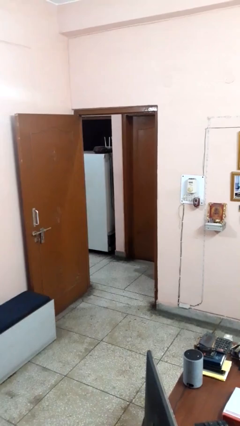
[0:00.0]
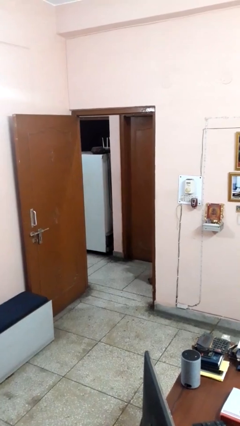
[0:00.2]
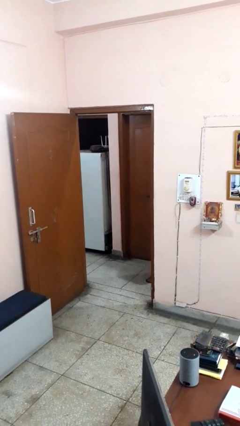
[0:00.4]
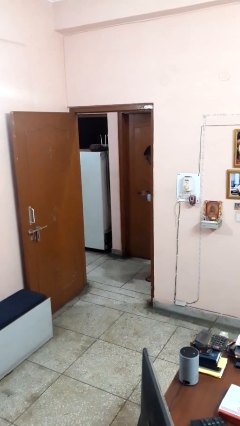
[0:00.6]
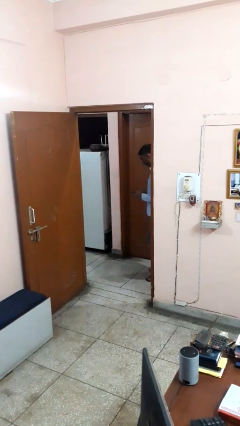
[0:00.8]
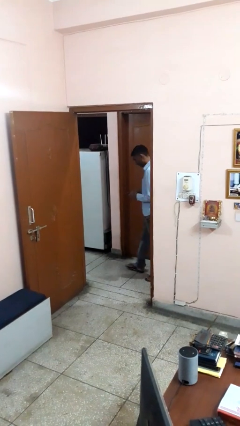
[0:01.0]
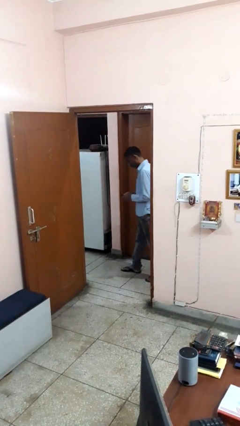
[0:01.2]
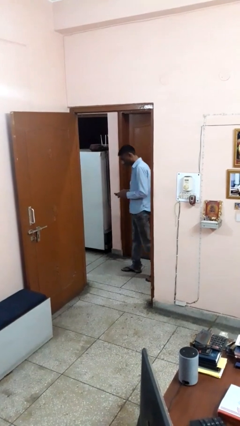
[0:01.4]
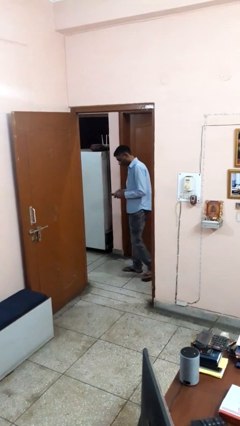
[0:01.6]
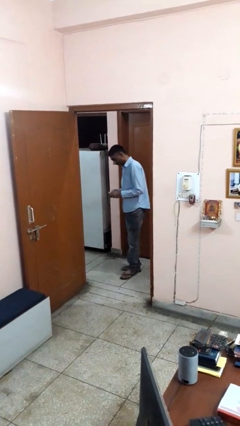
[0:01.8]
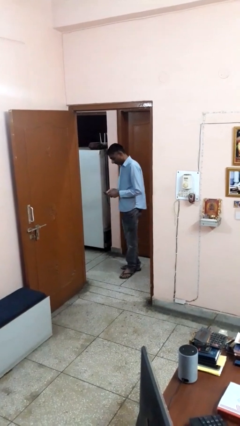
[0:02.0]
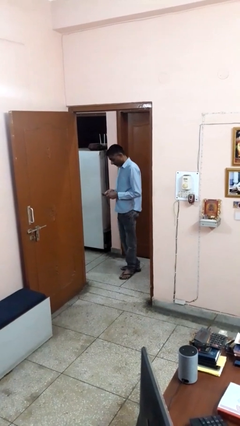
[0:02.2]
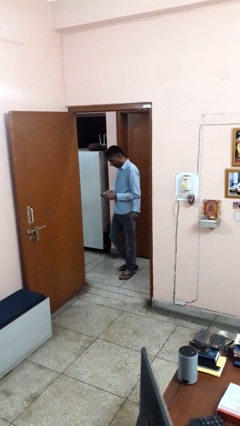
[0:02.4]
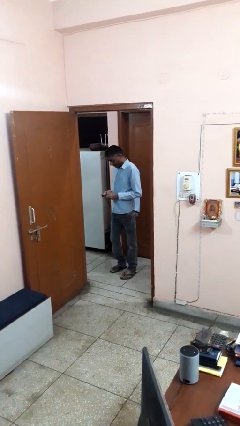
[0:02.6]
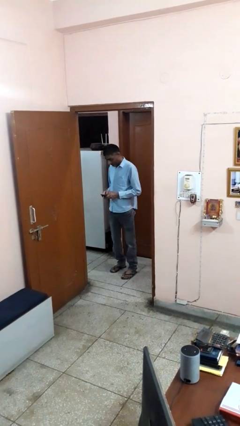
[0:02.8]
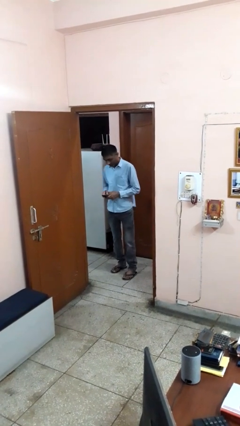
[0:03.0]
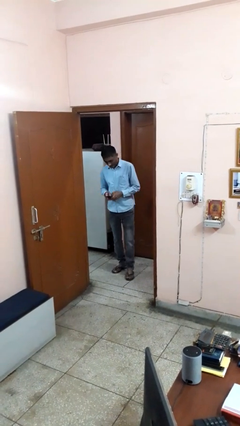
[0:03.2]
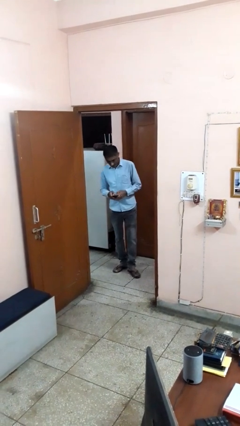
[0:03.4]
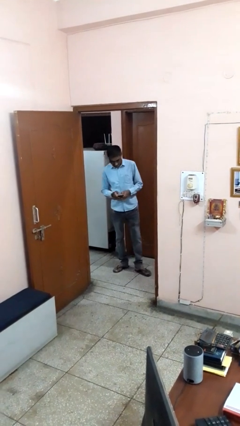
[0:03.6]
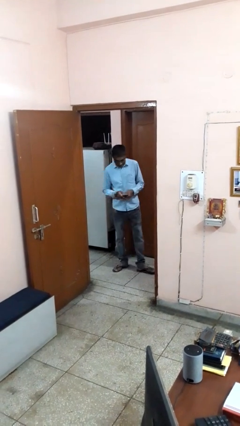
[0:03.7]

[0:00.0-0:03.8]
person enters scene through structure

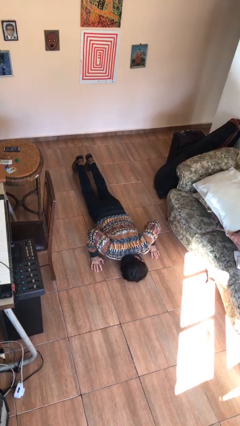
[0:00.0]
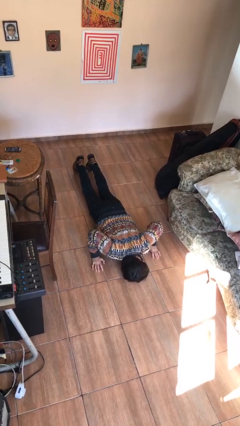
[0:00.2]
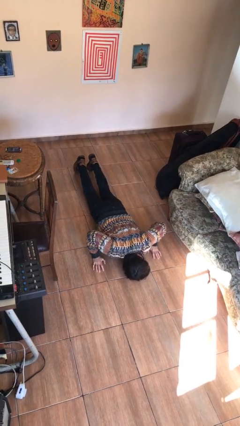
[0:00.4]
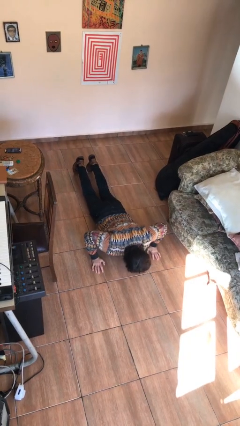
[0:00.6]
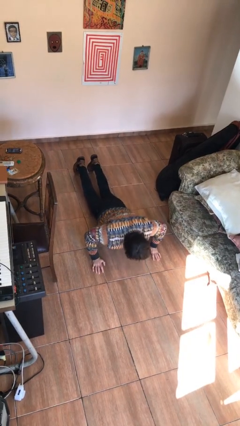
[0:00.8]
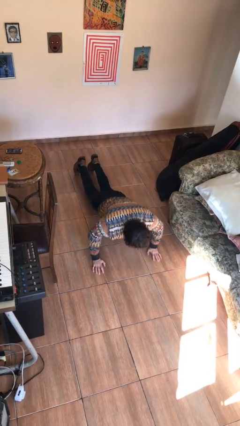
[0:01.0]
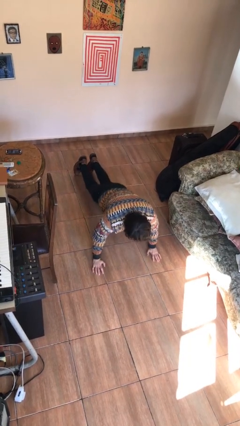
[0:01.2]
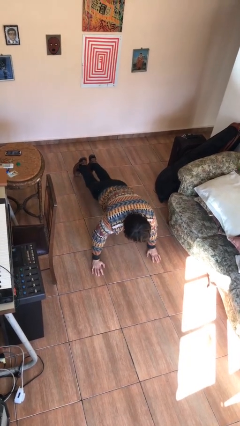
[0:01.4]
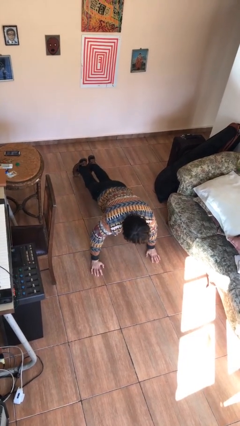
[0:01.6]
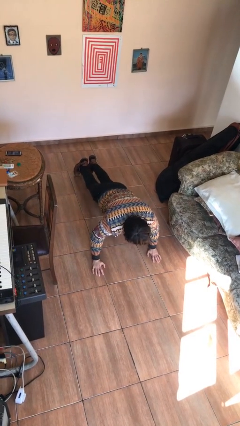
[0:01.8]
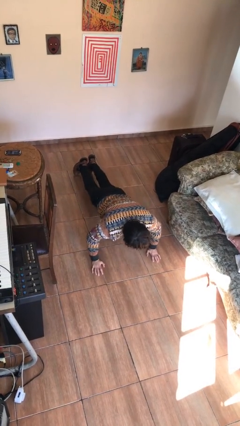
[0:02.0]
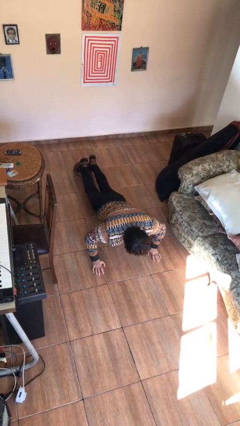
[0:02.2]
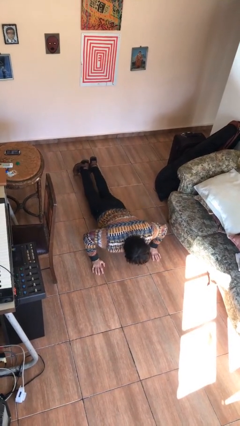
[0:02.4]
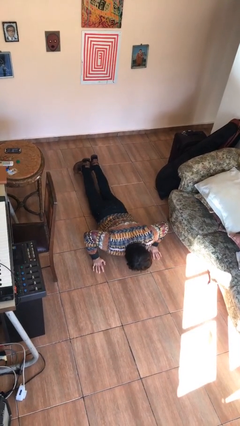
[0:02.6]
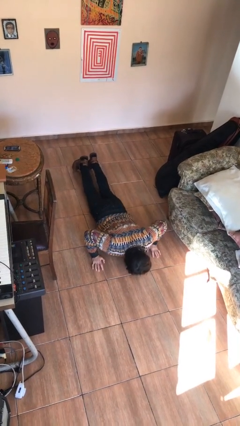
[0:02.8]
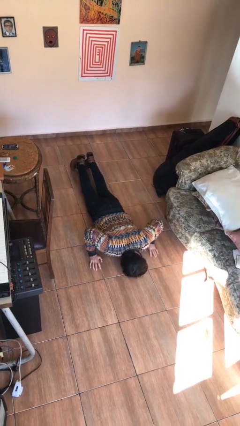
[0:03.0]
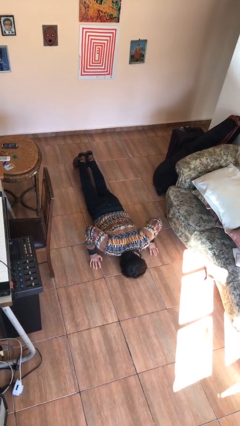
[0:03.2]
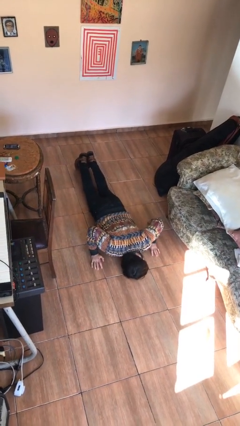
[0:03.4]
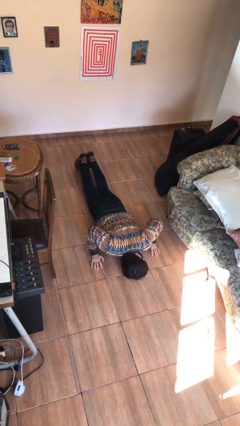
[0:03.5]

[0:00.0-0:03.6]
person exercises with pushup

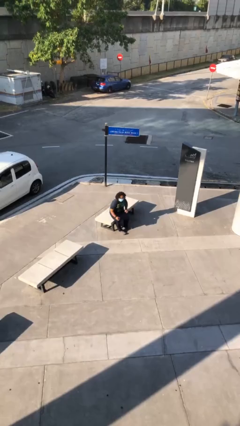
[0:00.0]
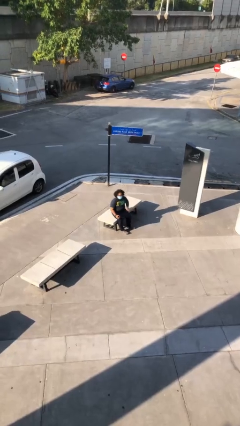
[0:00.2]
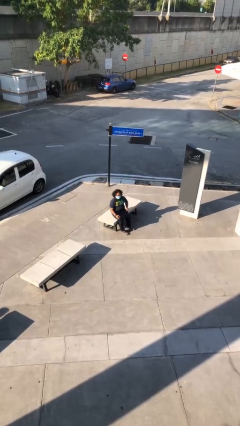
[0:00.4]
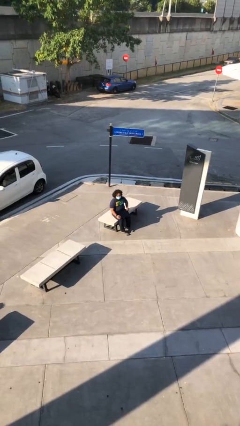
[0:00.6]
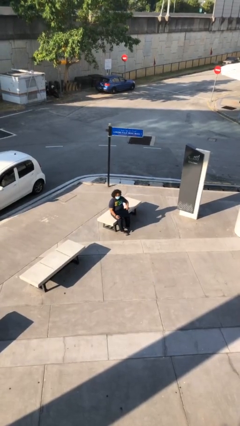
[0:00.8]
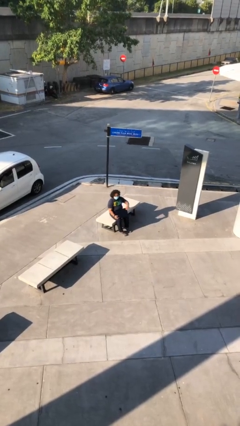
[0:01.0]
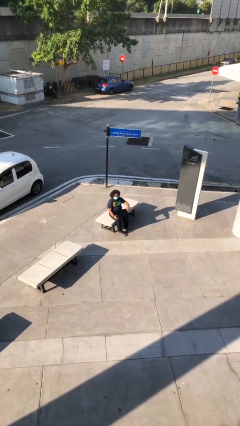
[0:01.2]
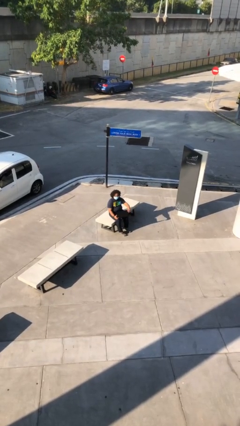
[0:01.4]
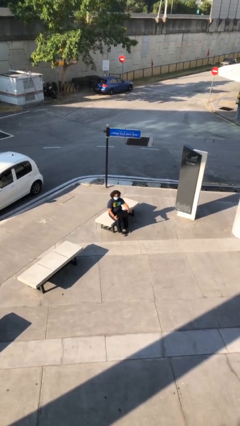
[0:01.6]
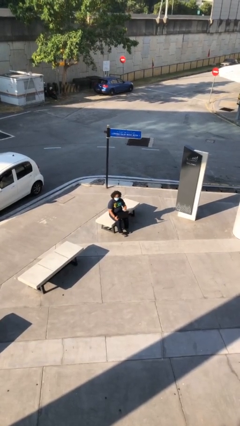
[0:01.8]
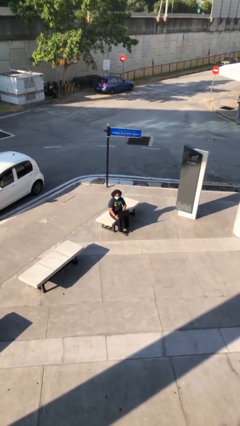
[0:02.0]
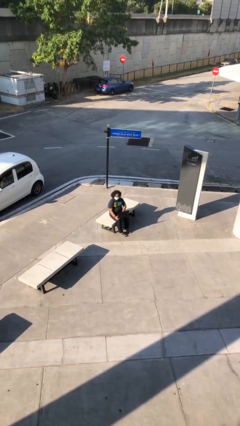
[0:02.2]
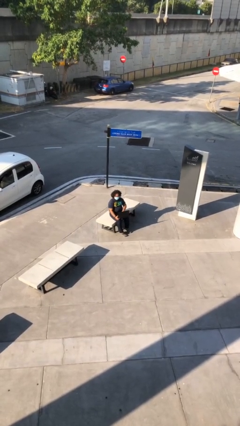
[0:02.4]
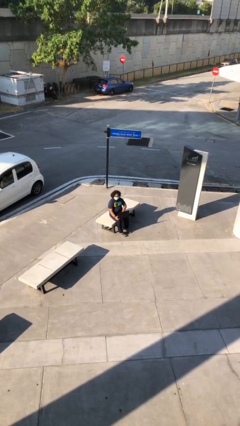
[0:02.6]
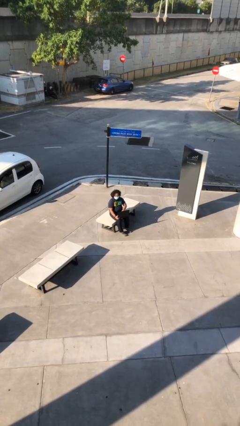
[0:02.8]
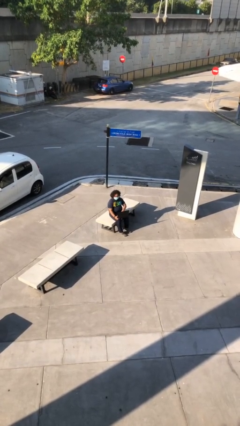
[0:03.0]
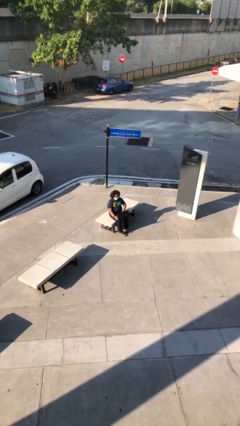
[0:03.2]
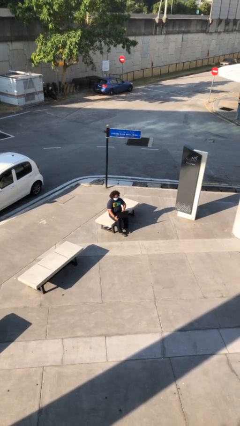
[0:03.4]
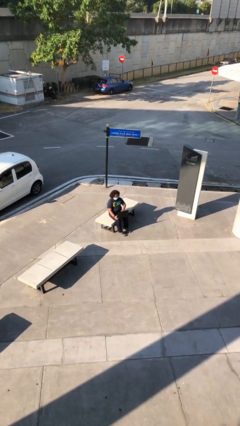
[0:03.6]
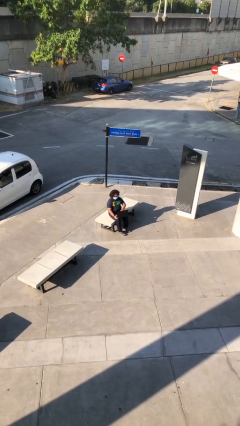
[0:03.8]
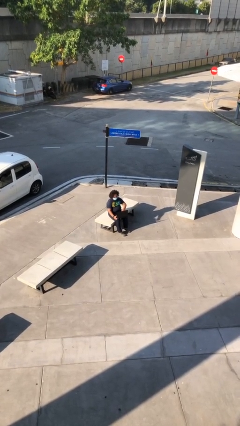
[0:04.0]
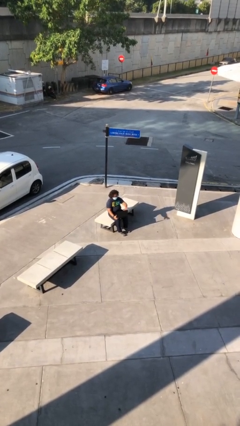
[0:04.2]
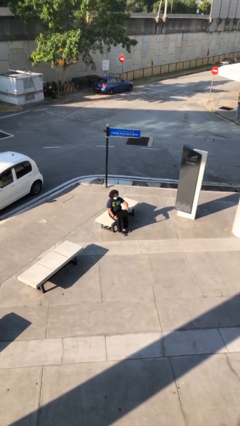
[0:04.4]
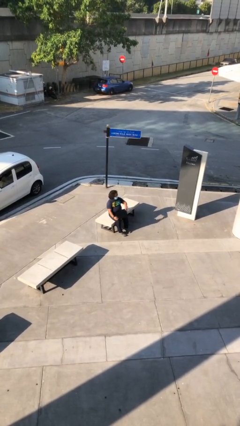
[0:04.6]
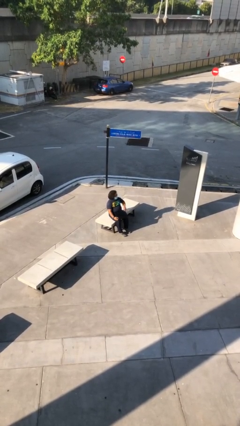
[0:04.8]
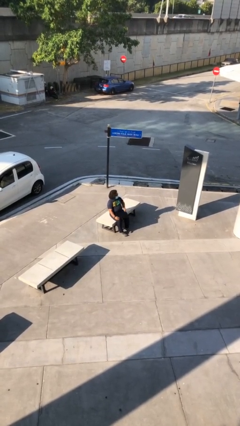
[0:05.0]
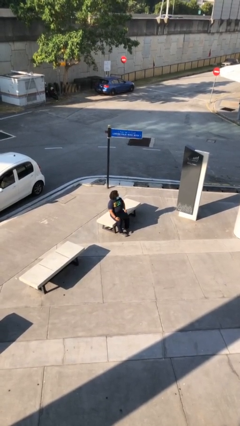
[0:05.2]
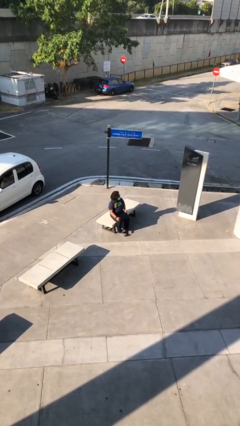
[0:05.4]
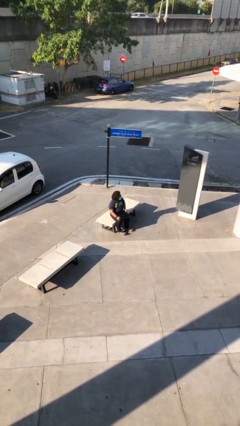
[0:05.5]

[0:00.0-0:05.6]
person interacts with laptop

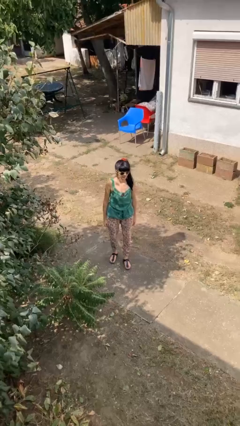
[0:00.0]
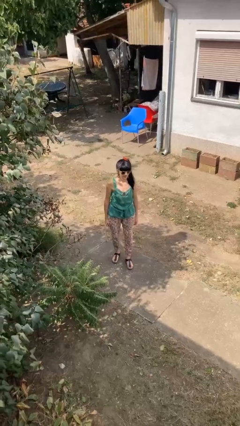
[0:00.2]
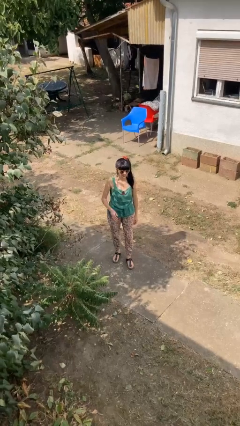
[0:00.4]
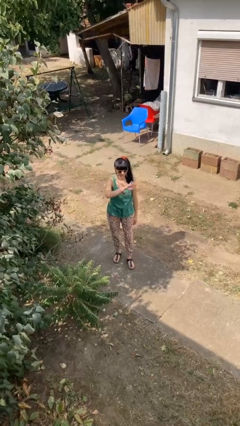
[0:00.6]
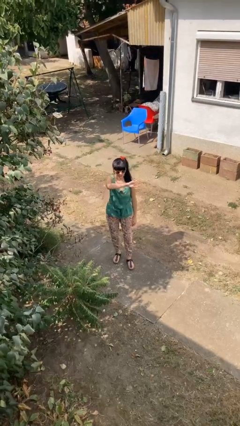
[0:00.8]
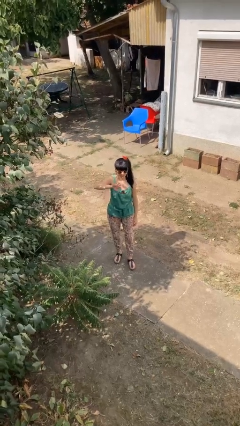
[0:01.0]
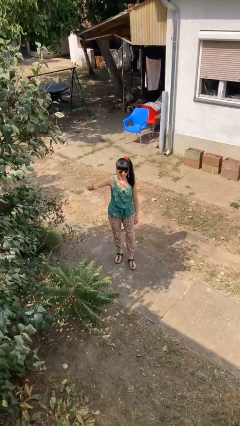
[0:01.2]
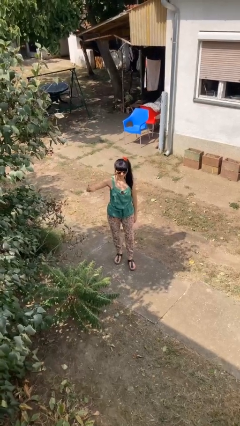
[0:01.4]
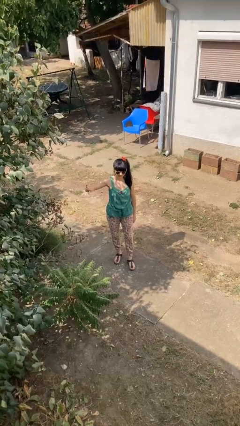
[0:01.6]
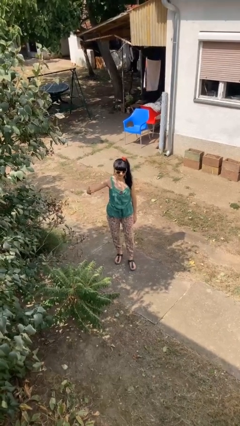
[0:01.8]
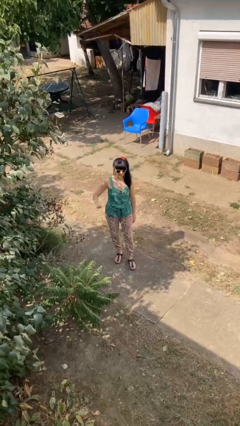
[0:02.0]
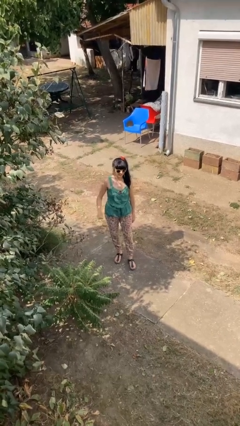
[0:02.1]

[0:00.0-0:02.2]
person gestures swipe right

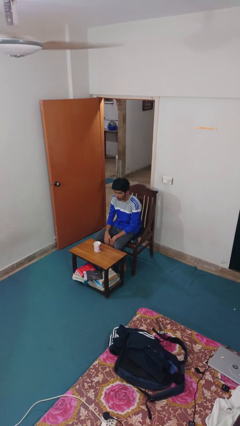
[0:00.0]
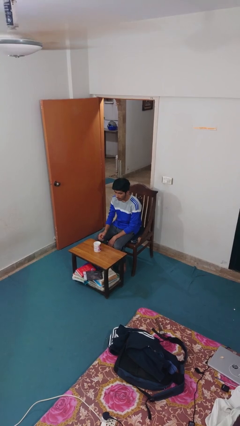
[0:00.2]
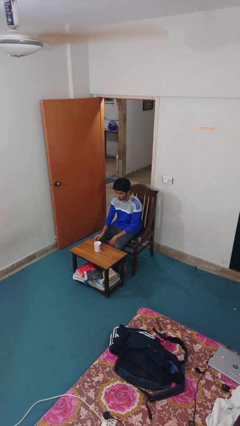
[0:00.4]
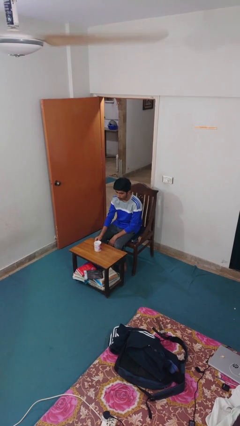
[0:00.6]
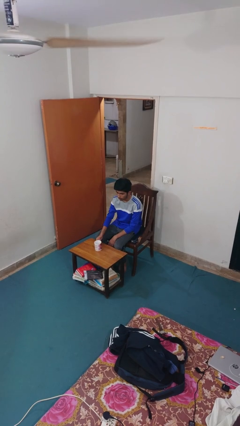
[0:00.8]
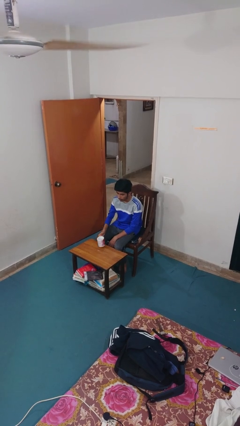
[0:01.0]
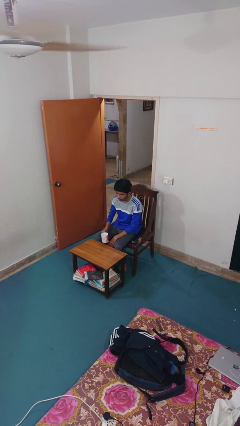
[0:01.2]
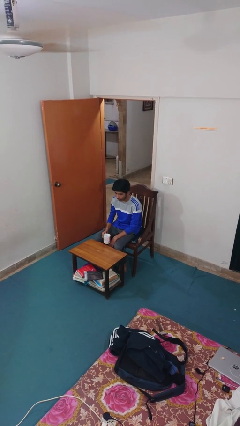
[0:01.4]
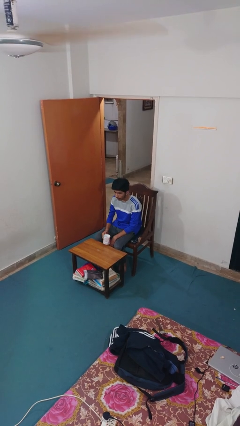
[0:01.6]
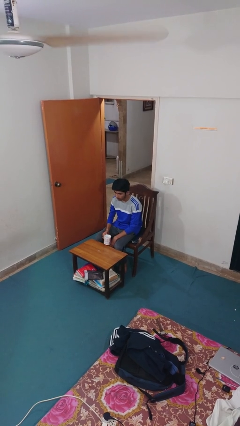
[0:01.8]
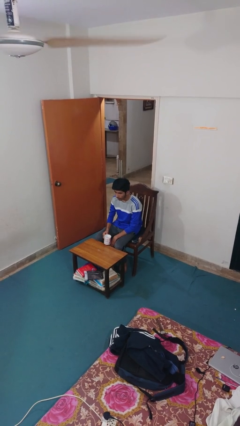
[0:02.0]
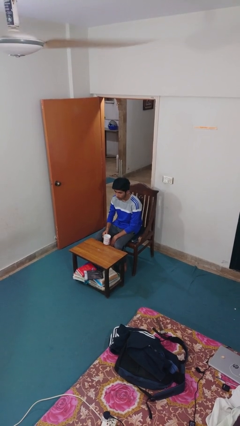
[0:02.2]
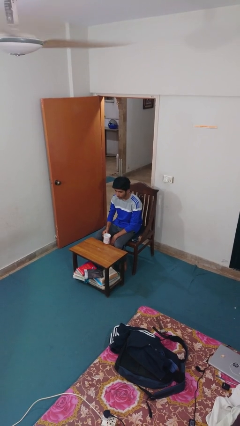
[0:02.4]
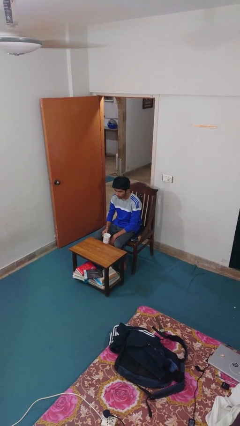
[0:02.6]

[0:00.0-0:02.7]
person picks up object from table
